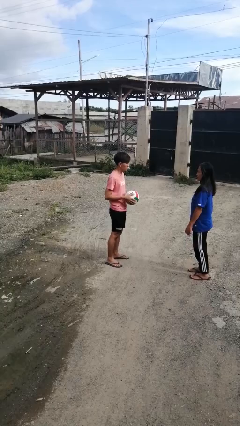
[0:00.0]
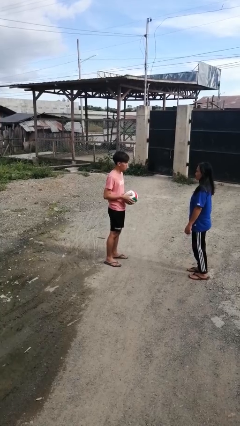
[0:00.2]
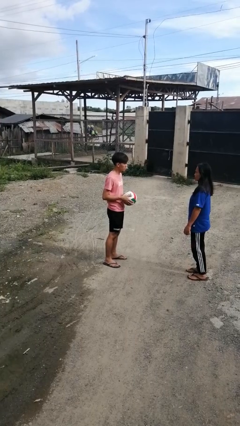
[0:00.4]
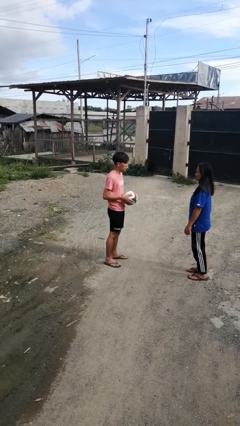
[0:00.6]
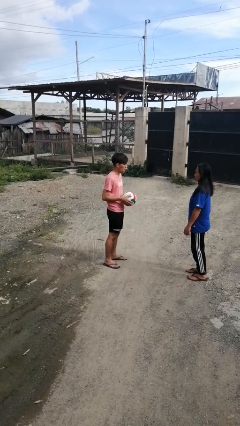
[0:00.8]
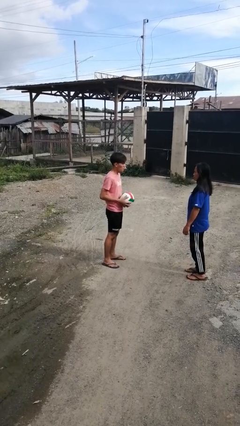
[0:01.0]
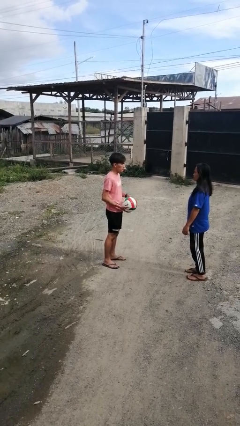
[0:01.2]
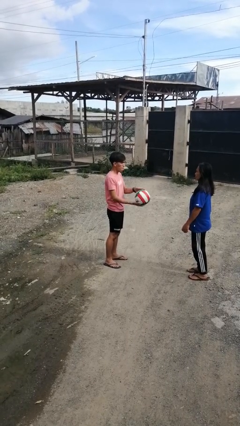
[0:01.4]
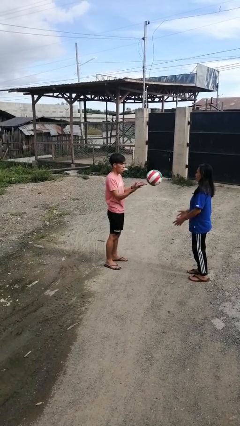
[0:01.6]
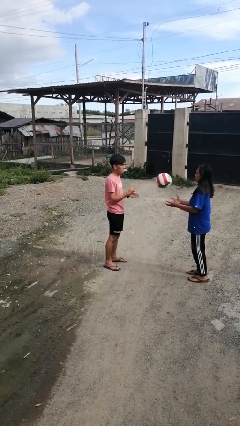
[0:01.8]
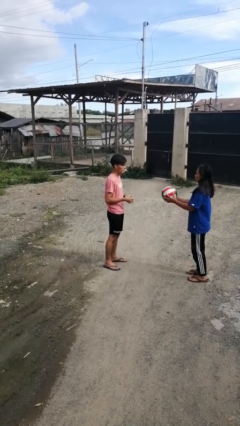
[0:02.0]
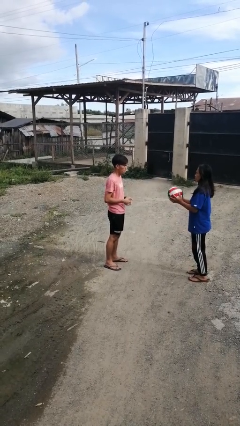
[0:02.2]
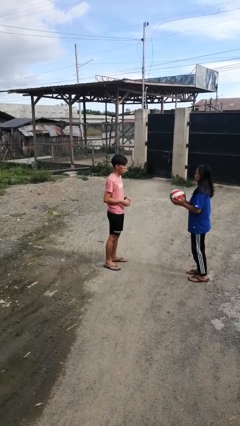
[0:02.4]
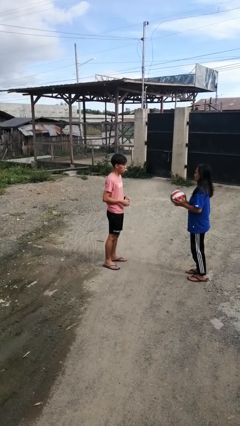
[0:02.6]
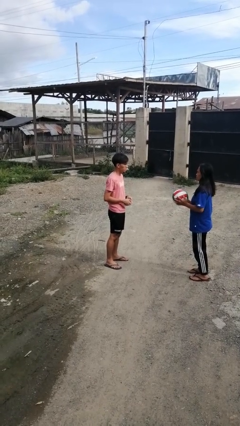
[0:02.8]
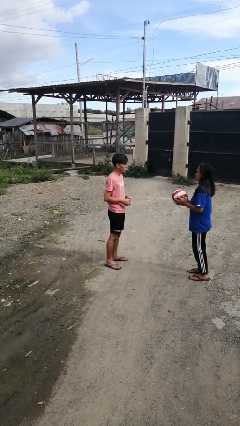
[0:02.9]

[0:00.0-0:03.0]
person throws object to person

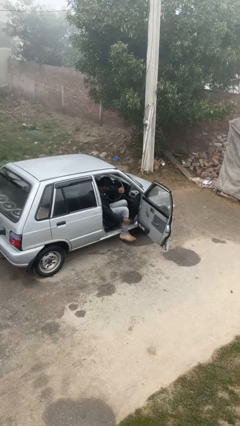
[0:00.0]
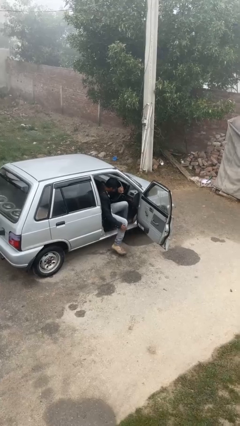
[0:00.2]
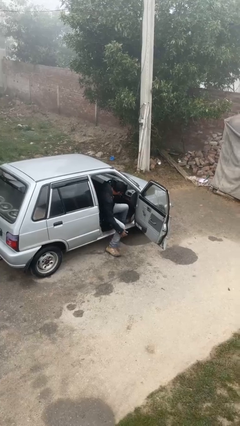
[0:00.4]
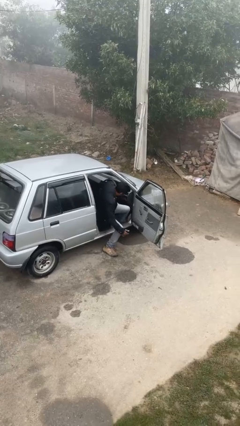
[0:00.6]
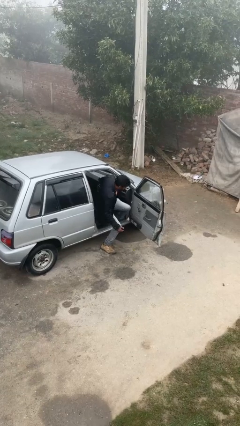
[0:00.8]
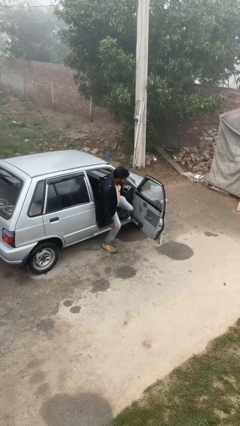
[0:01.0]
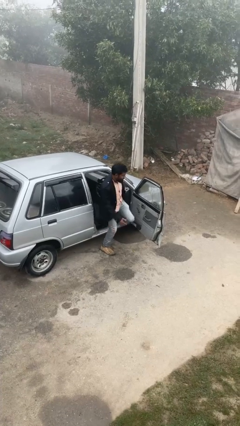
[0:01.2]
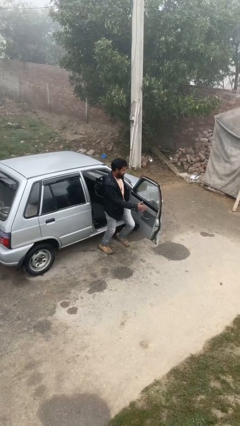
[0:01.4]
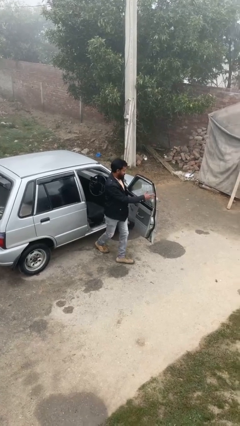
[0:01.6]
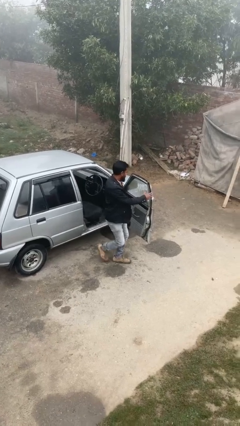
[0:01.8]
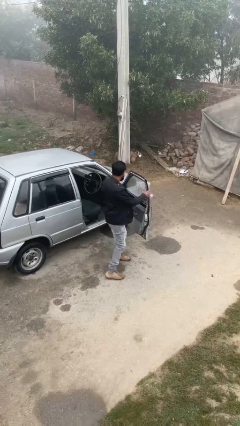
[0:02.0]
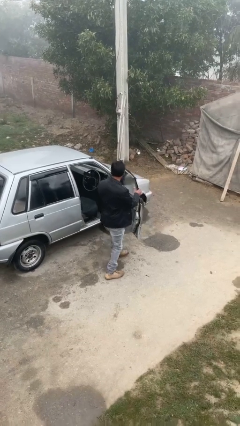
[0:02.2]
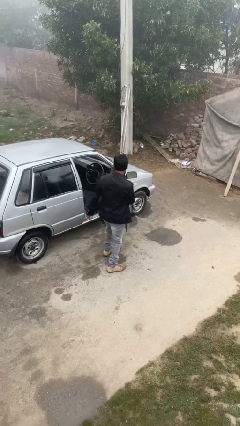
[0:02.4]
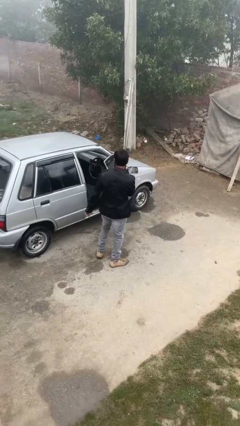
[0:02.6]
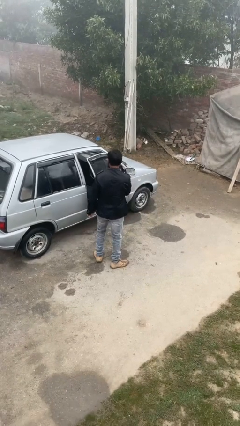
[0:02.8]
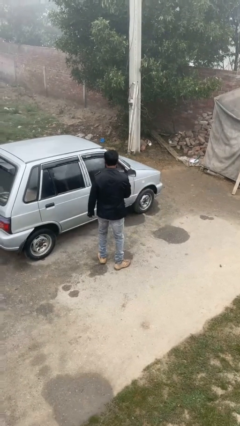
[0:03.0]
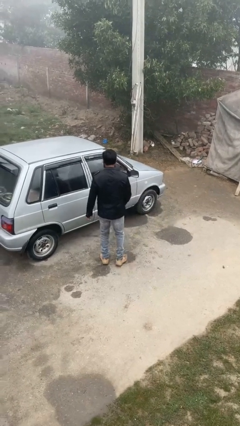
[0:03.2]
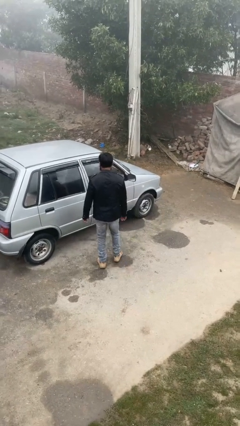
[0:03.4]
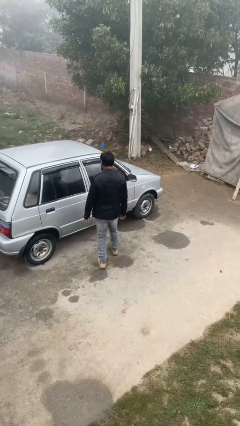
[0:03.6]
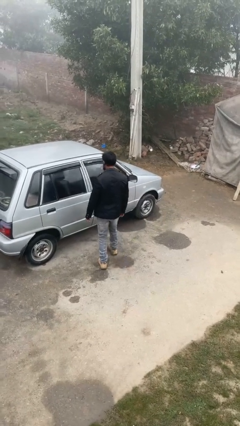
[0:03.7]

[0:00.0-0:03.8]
person exits car

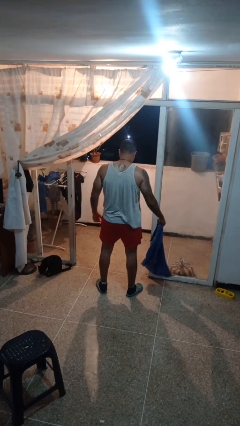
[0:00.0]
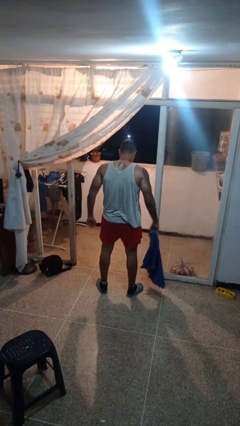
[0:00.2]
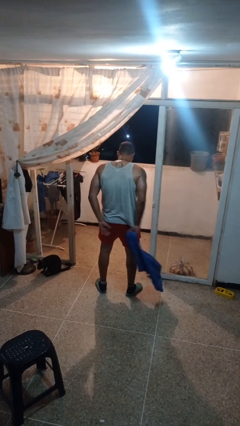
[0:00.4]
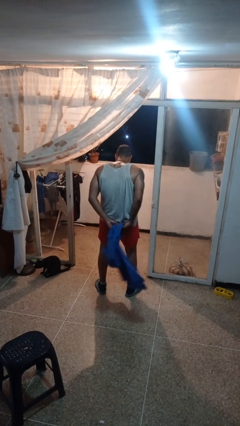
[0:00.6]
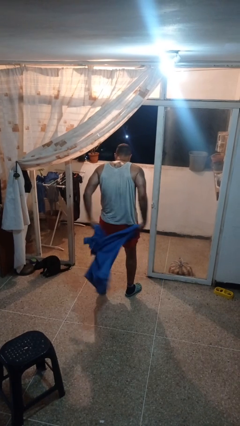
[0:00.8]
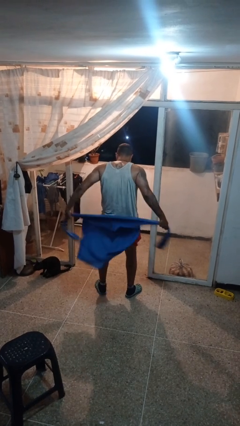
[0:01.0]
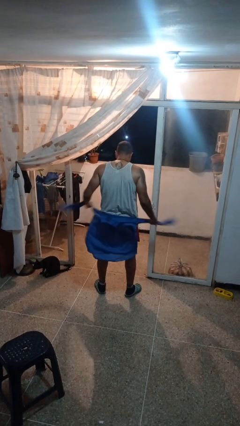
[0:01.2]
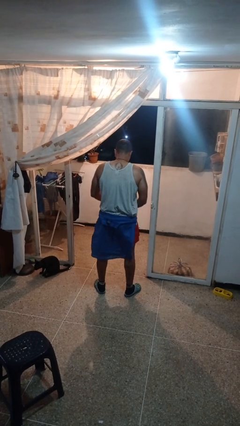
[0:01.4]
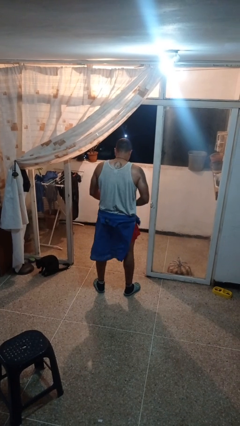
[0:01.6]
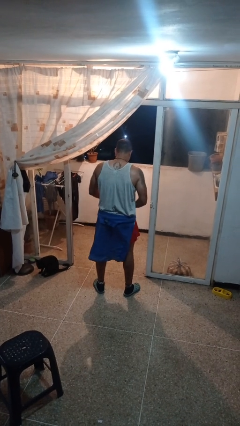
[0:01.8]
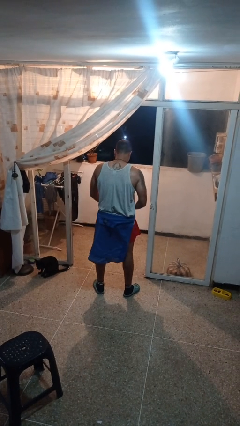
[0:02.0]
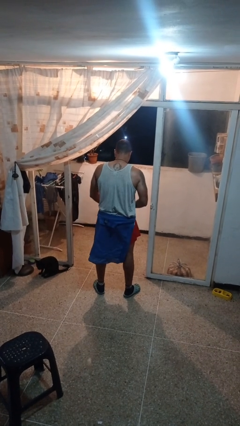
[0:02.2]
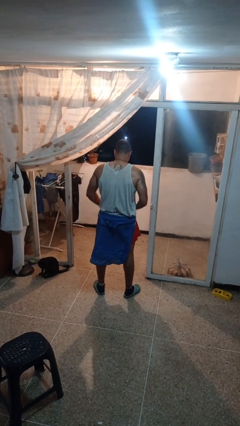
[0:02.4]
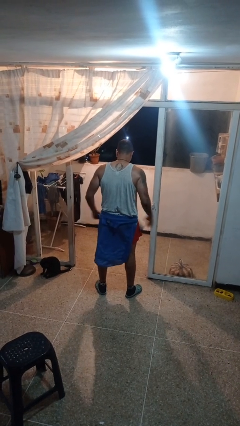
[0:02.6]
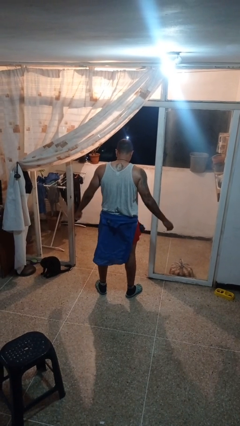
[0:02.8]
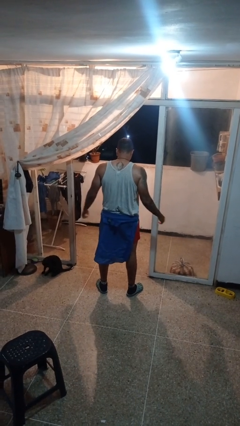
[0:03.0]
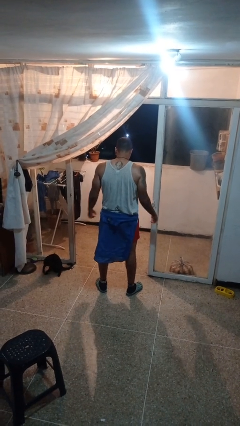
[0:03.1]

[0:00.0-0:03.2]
person ties jacket around waist

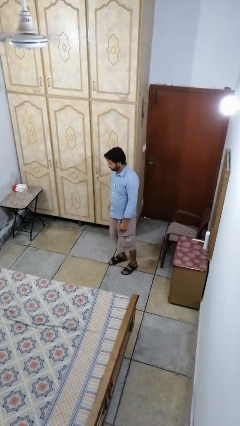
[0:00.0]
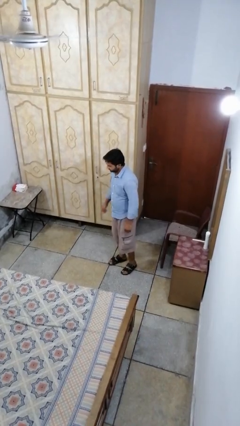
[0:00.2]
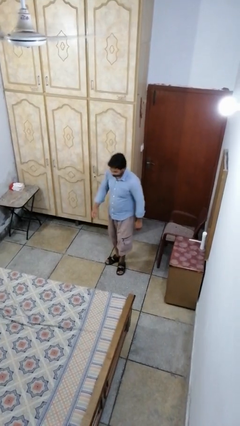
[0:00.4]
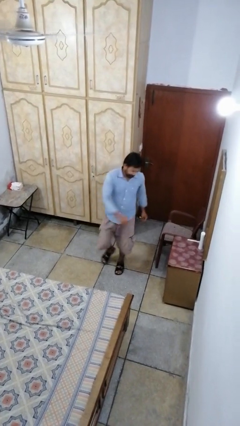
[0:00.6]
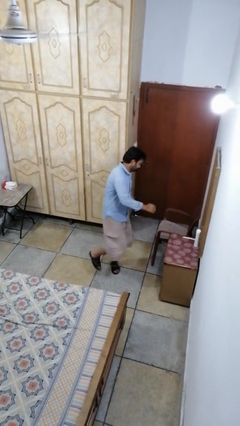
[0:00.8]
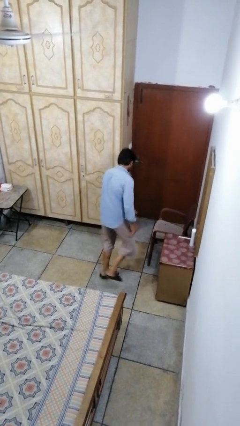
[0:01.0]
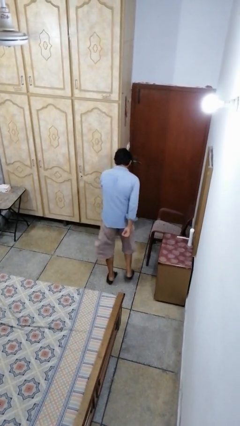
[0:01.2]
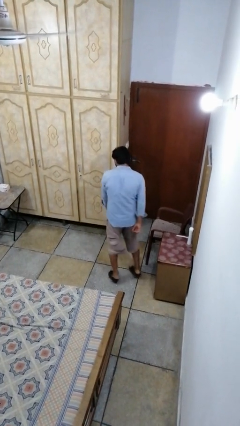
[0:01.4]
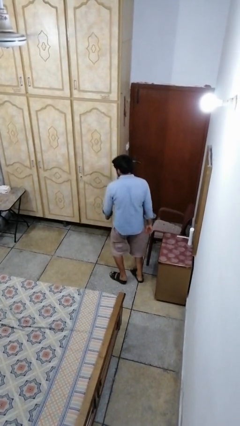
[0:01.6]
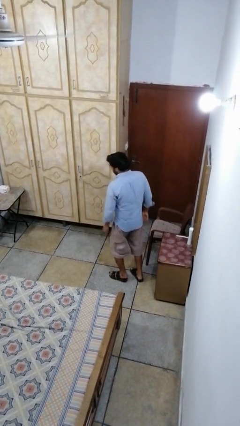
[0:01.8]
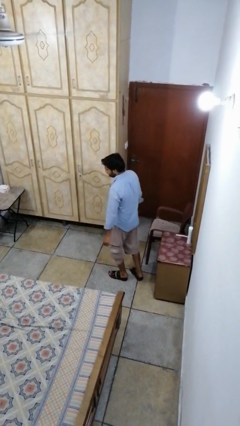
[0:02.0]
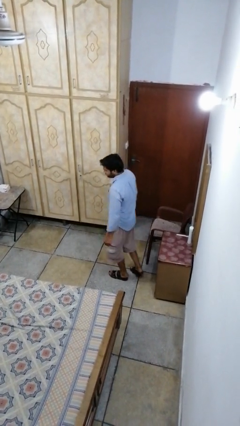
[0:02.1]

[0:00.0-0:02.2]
person twirls

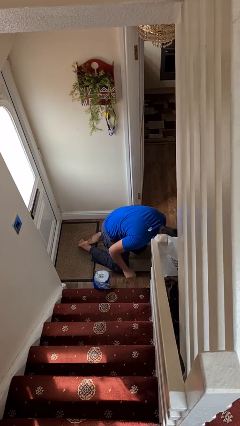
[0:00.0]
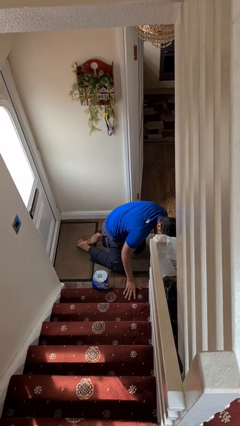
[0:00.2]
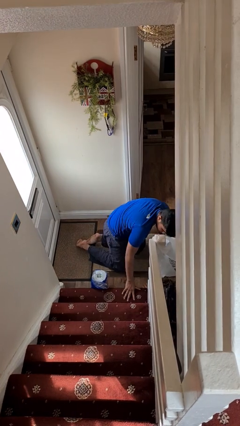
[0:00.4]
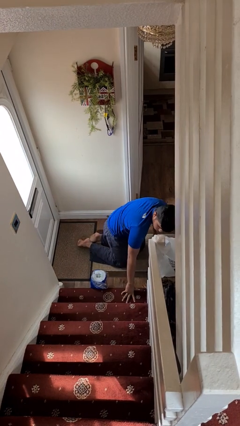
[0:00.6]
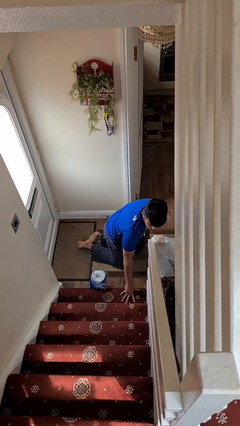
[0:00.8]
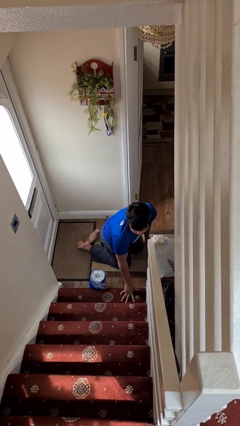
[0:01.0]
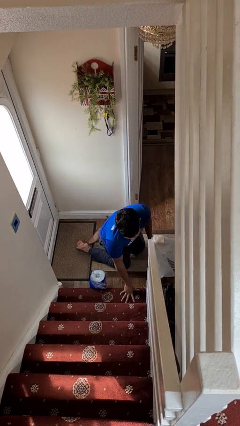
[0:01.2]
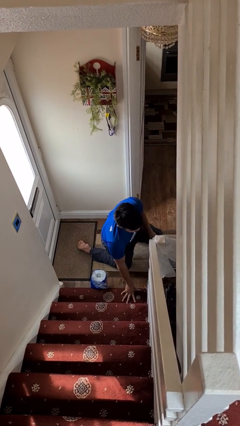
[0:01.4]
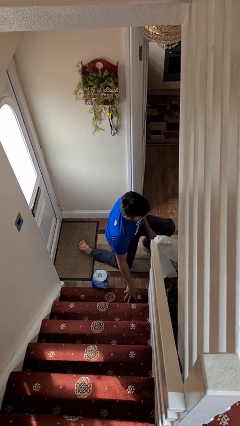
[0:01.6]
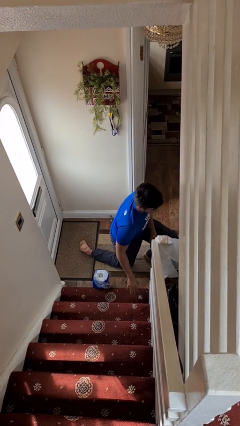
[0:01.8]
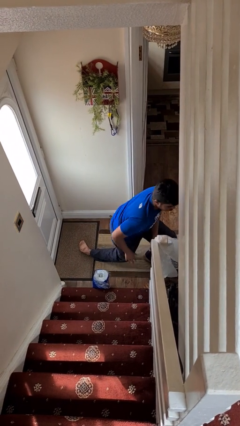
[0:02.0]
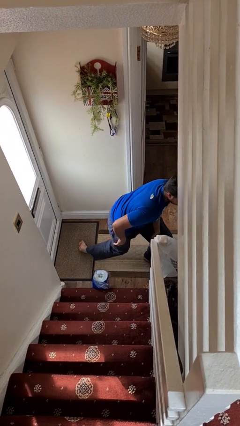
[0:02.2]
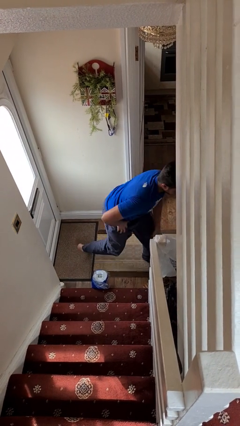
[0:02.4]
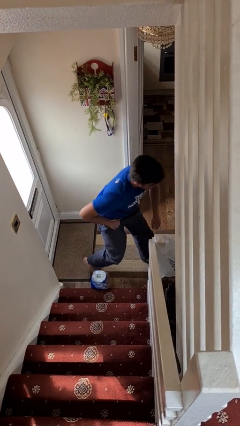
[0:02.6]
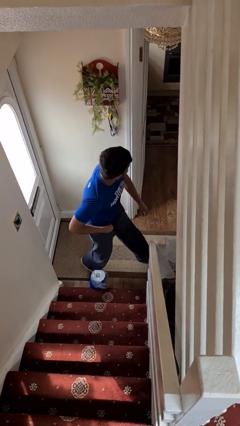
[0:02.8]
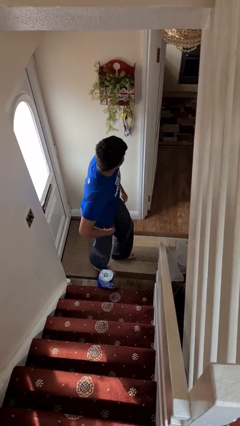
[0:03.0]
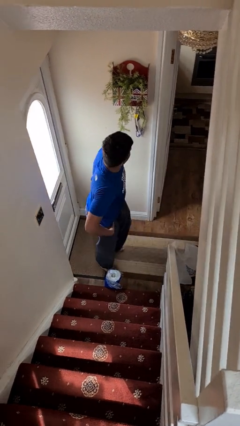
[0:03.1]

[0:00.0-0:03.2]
person stands up from floor

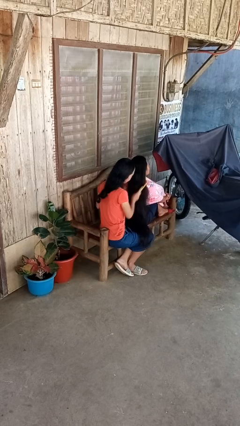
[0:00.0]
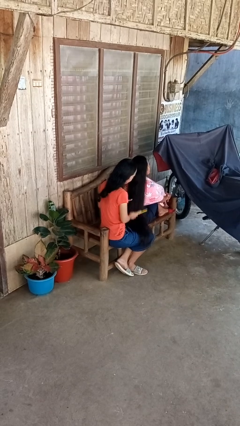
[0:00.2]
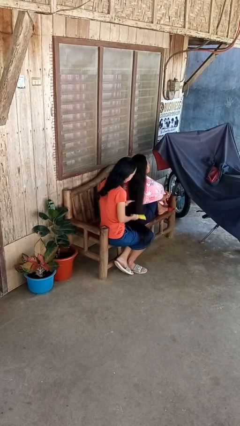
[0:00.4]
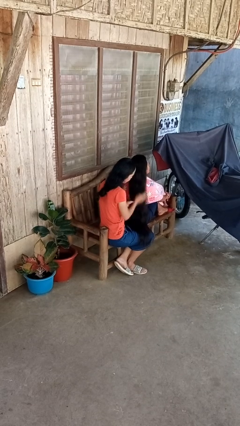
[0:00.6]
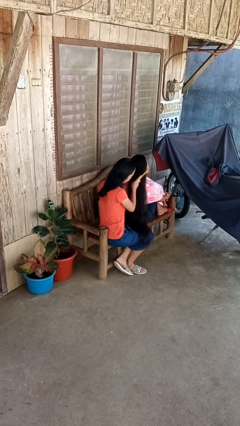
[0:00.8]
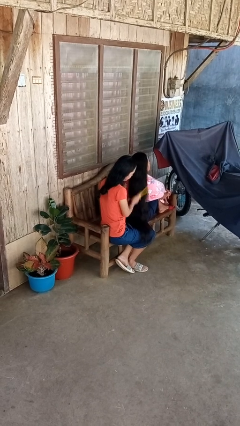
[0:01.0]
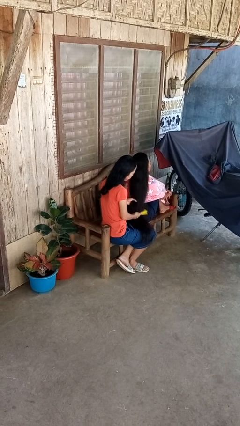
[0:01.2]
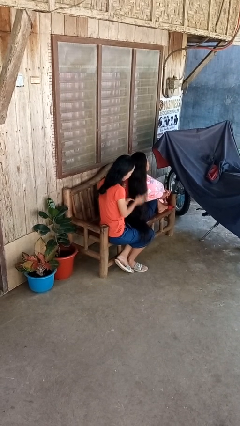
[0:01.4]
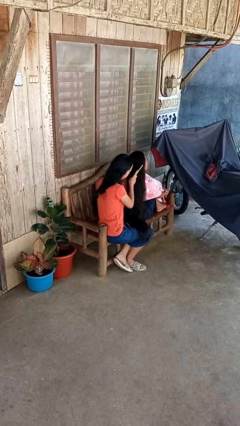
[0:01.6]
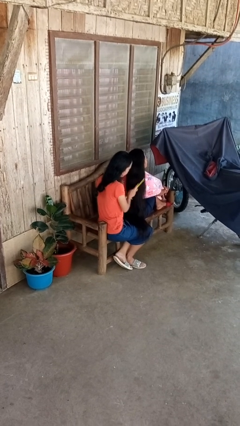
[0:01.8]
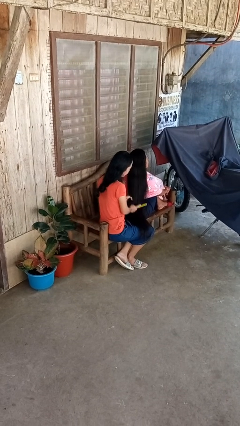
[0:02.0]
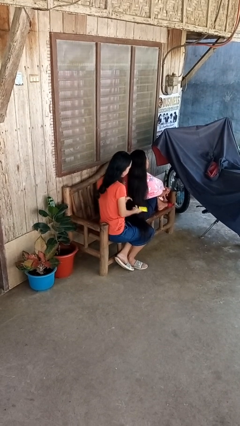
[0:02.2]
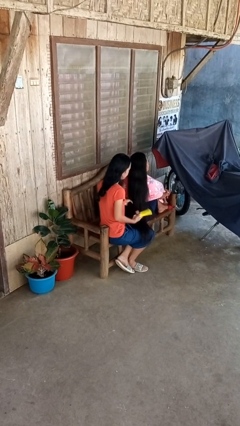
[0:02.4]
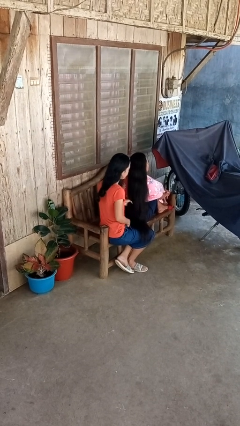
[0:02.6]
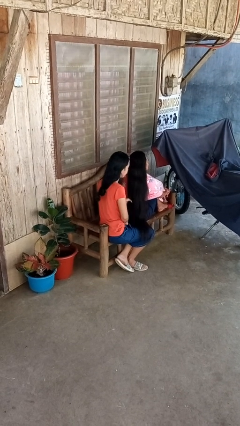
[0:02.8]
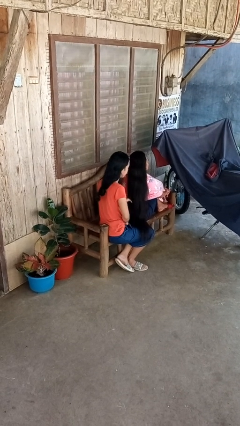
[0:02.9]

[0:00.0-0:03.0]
person brushes hair of person
